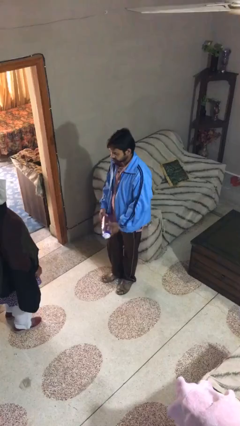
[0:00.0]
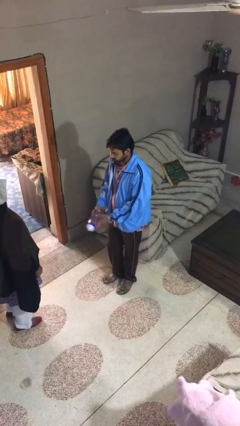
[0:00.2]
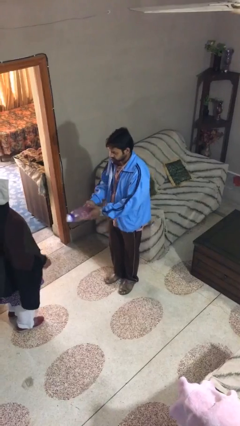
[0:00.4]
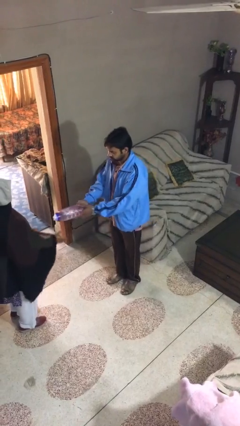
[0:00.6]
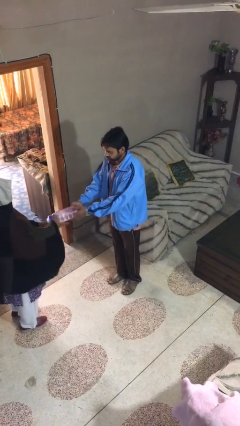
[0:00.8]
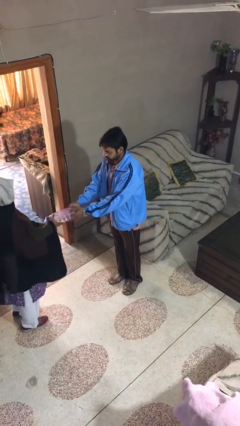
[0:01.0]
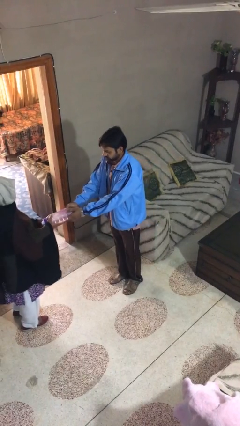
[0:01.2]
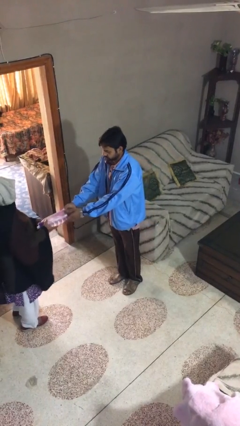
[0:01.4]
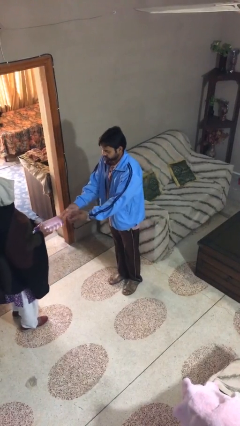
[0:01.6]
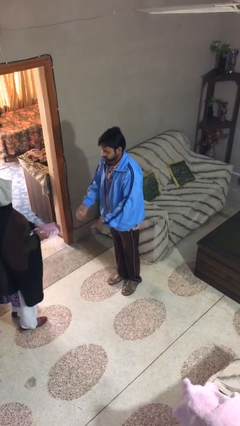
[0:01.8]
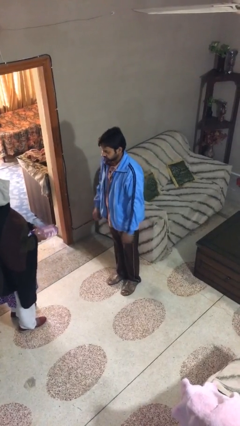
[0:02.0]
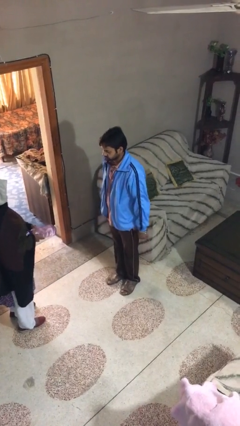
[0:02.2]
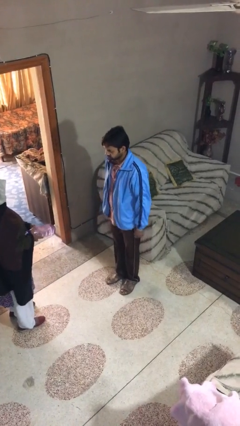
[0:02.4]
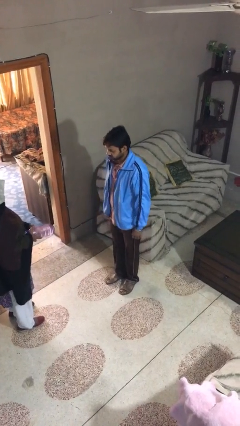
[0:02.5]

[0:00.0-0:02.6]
person transfers object to person

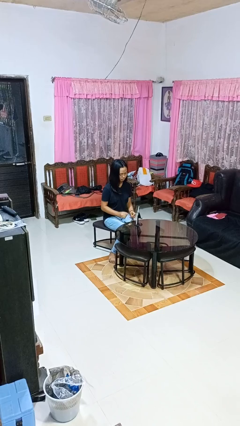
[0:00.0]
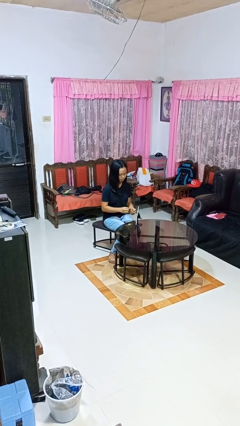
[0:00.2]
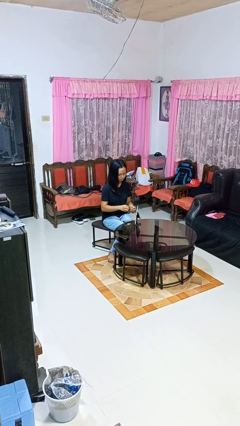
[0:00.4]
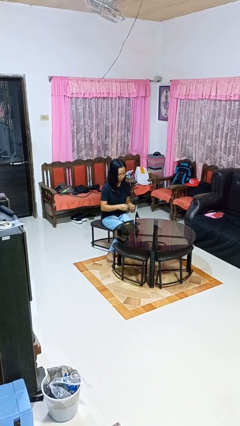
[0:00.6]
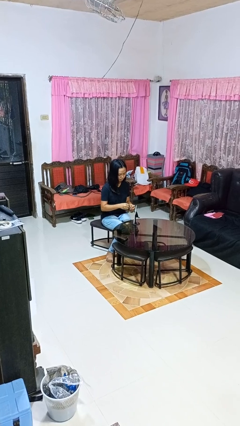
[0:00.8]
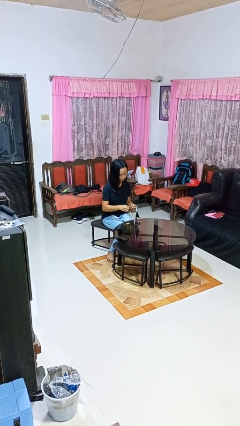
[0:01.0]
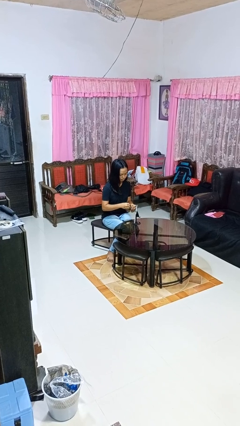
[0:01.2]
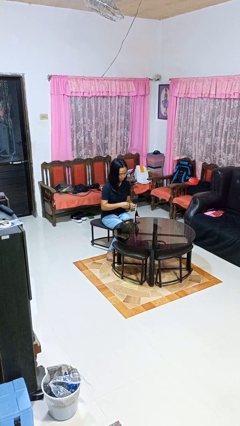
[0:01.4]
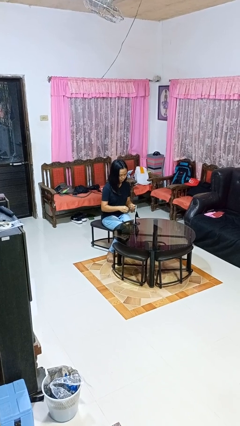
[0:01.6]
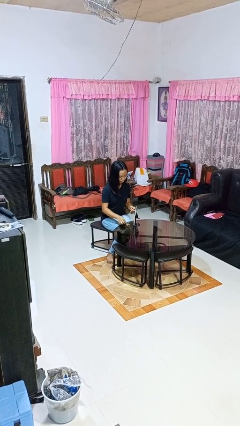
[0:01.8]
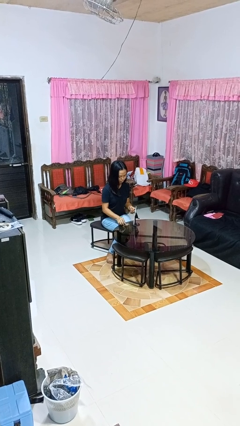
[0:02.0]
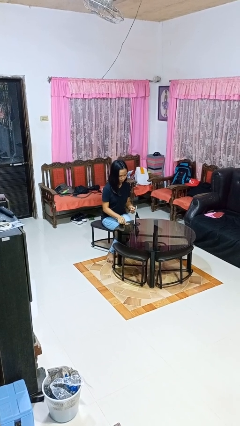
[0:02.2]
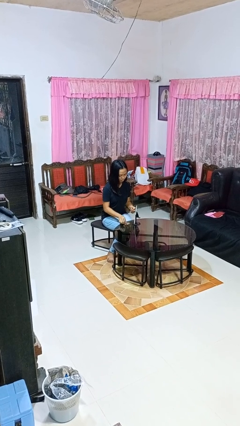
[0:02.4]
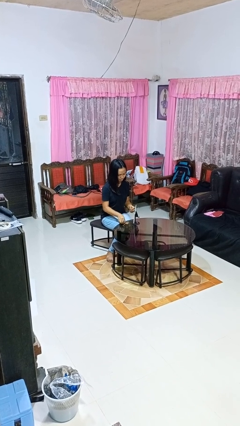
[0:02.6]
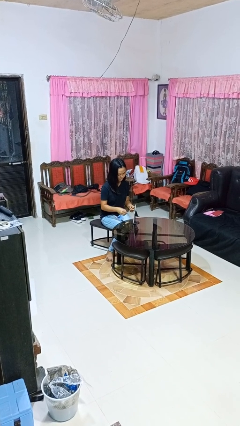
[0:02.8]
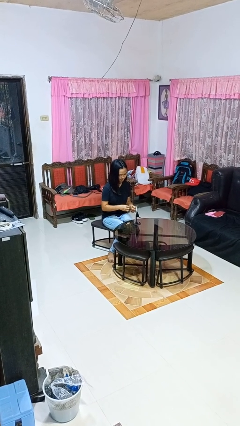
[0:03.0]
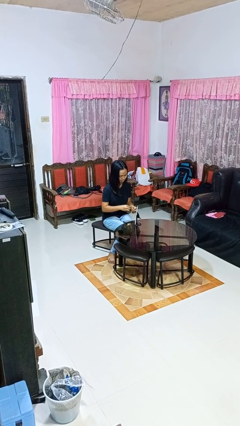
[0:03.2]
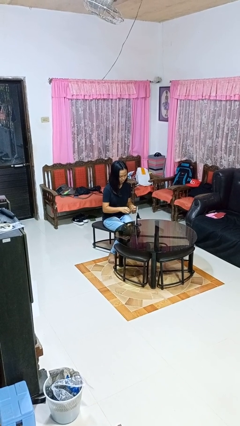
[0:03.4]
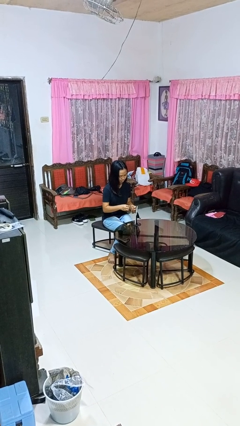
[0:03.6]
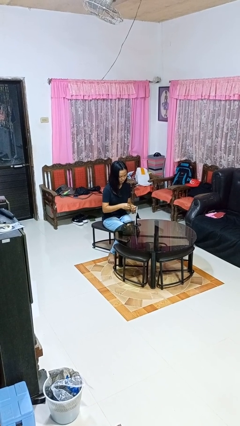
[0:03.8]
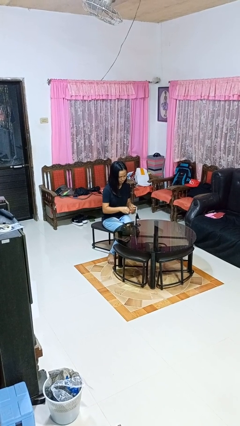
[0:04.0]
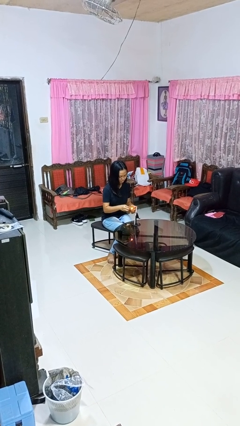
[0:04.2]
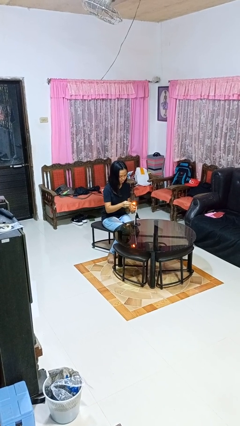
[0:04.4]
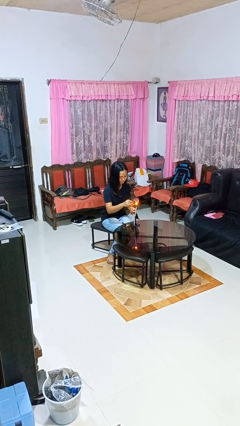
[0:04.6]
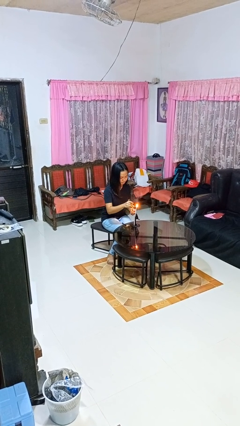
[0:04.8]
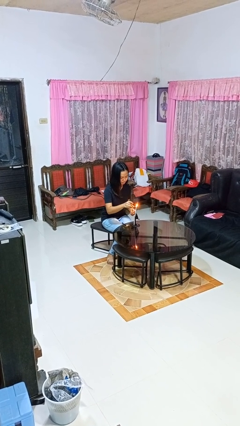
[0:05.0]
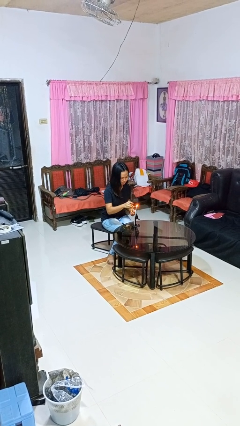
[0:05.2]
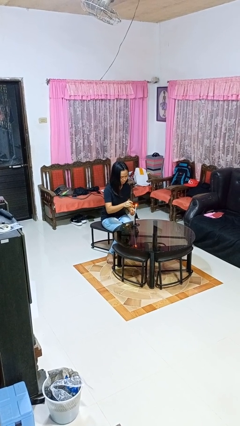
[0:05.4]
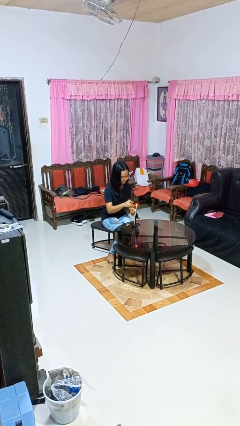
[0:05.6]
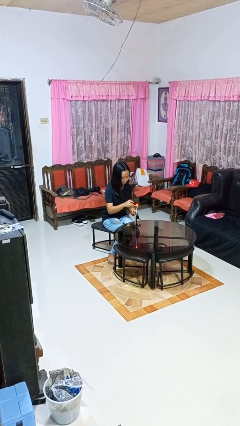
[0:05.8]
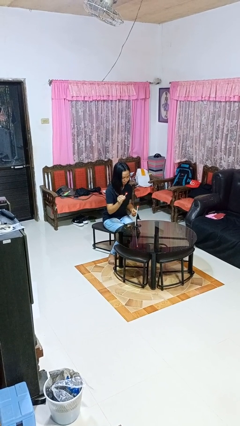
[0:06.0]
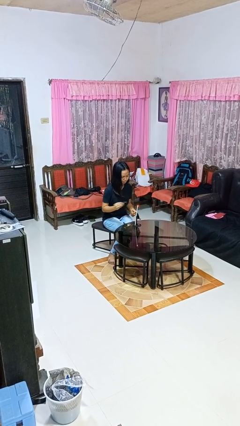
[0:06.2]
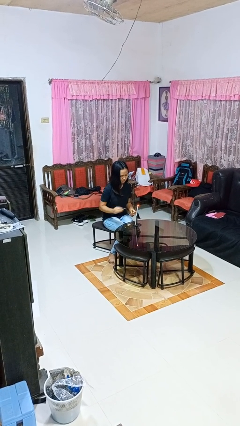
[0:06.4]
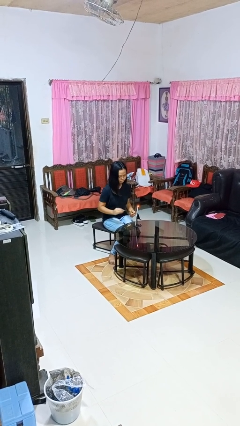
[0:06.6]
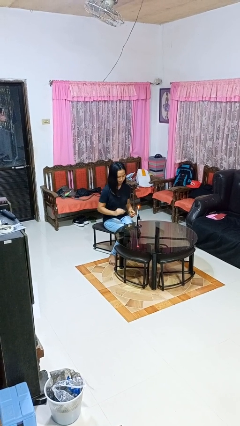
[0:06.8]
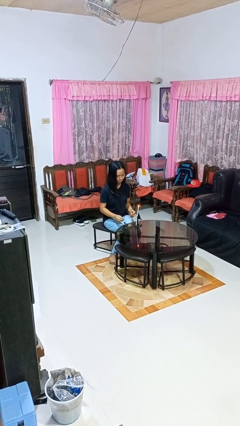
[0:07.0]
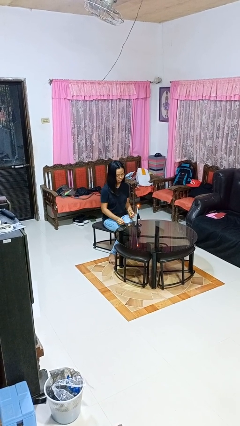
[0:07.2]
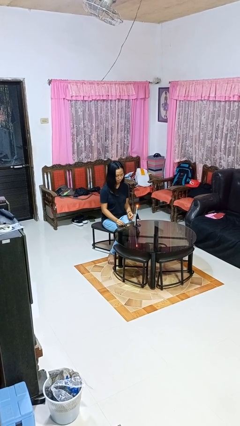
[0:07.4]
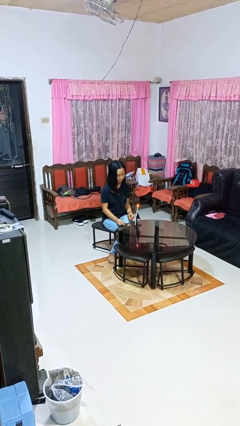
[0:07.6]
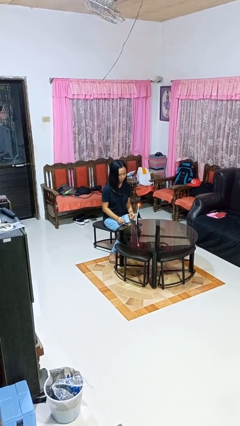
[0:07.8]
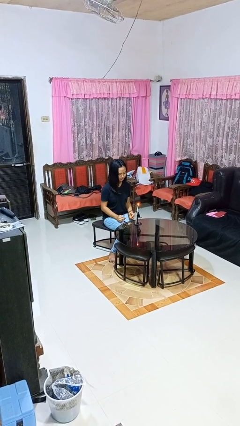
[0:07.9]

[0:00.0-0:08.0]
person lights candle

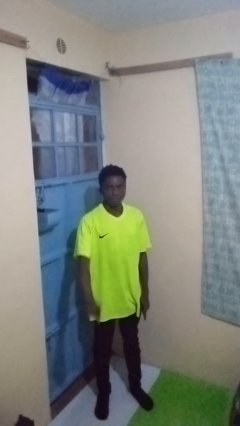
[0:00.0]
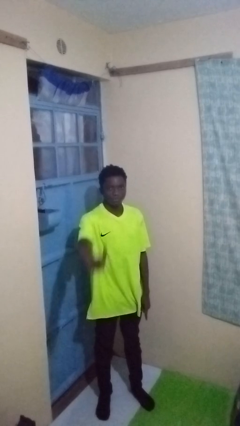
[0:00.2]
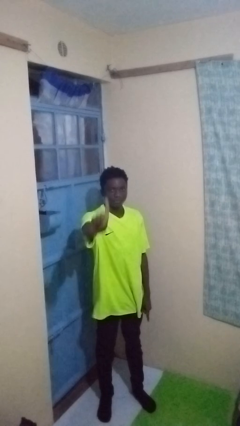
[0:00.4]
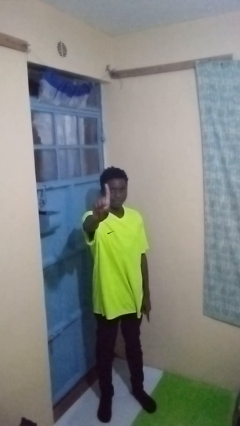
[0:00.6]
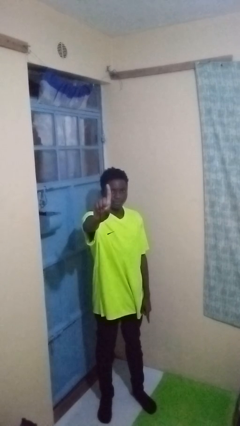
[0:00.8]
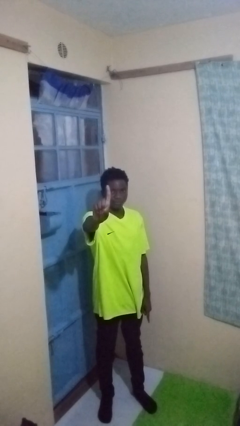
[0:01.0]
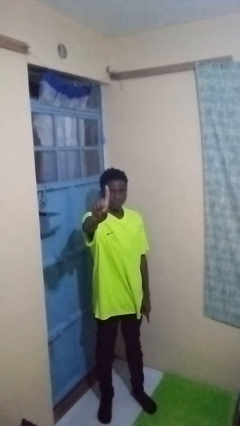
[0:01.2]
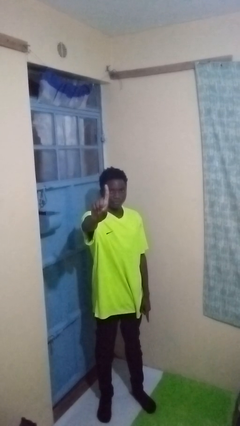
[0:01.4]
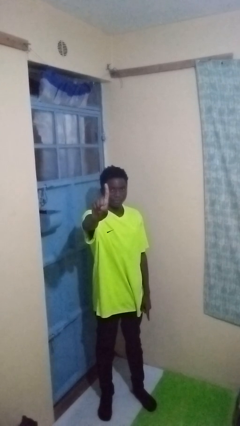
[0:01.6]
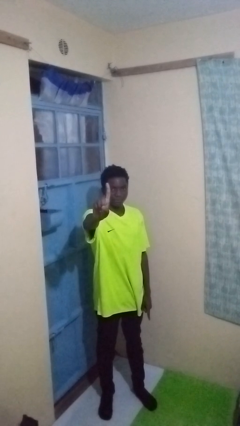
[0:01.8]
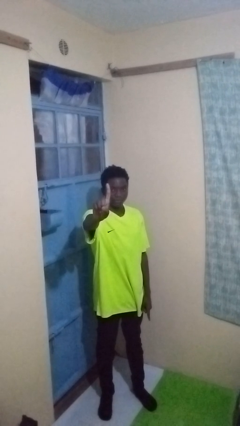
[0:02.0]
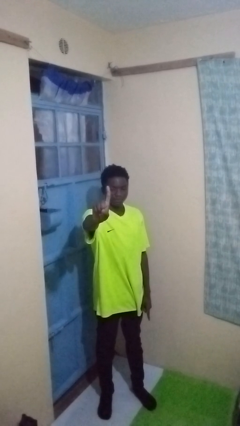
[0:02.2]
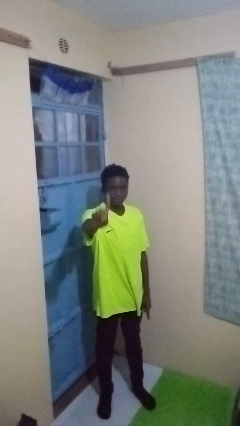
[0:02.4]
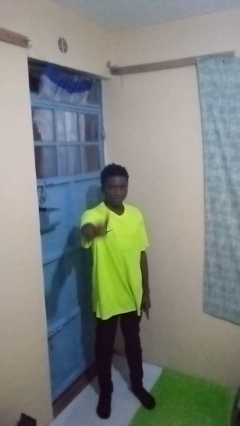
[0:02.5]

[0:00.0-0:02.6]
person gestures number one

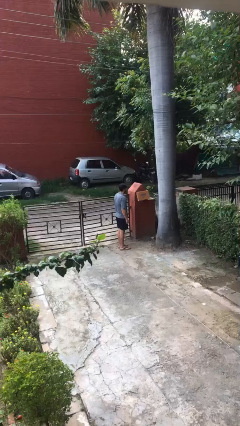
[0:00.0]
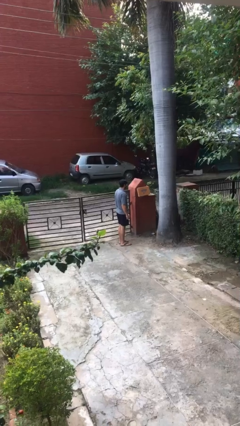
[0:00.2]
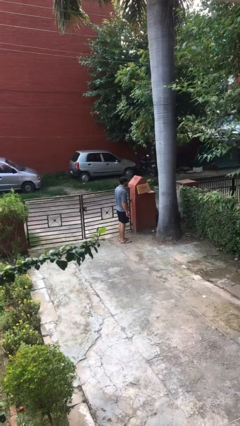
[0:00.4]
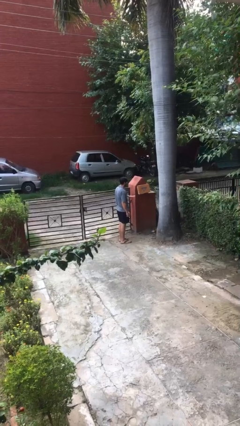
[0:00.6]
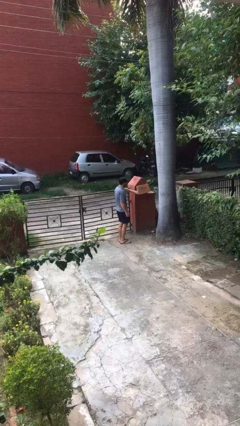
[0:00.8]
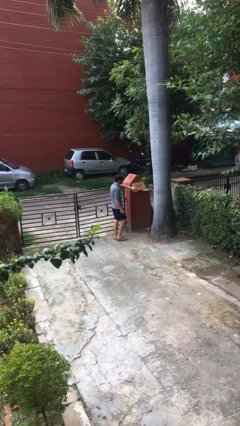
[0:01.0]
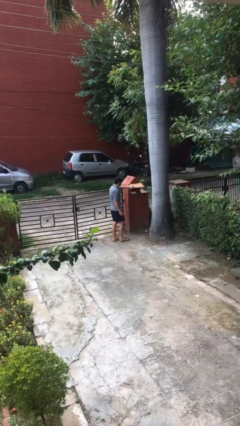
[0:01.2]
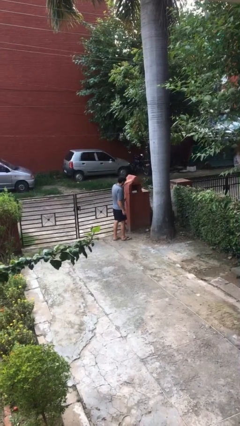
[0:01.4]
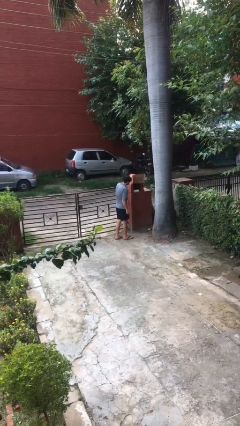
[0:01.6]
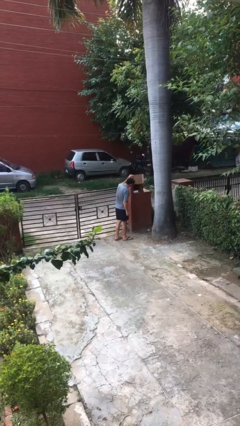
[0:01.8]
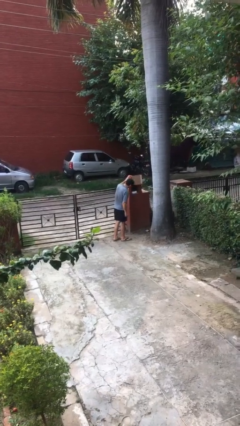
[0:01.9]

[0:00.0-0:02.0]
person opens mailbox

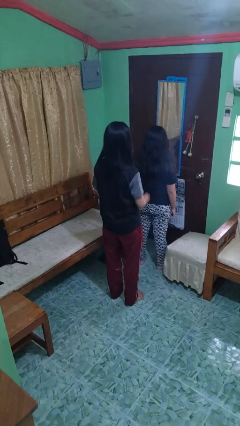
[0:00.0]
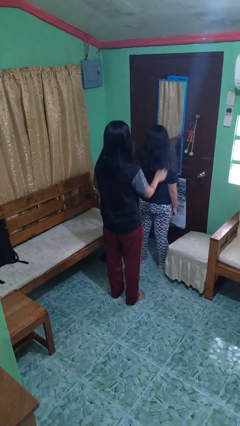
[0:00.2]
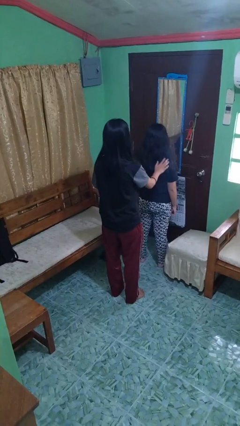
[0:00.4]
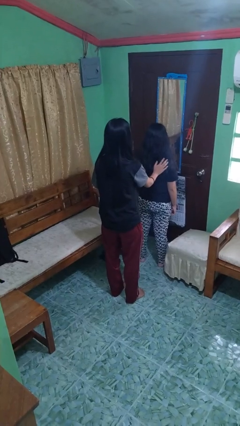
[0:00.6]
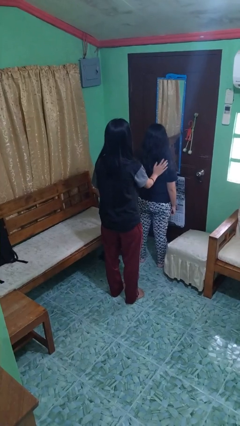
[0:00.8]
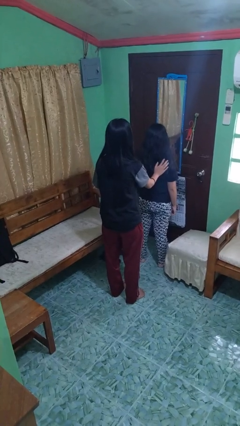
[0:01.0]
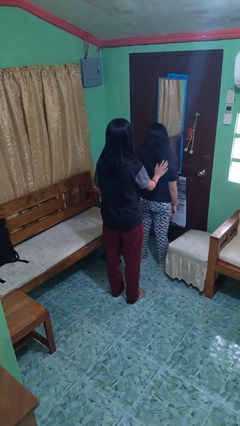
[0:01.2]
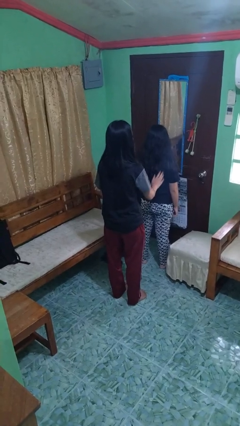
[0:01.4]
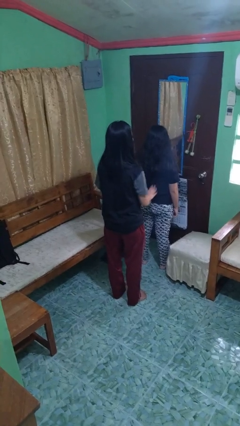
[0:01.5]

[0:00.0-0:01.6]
person touches back of person

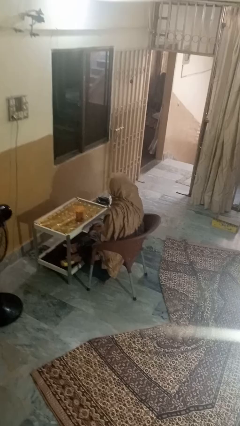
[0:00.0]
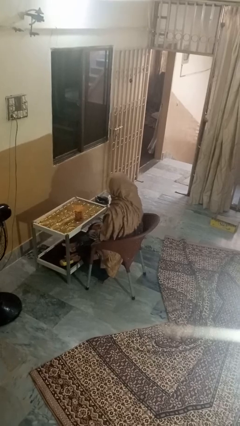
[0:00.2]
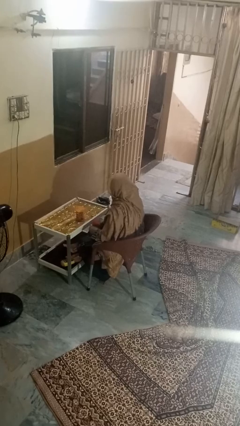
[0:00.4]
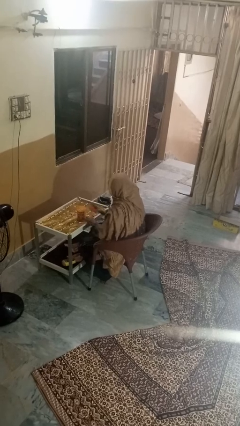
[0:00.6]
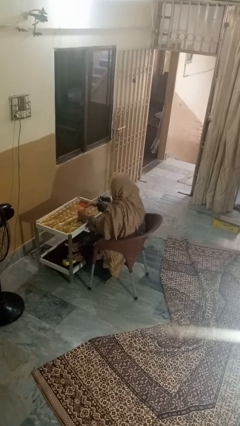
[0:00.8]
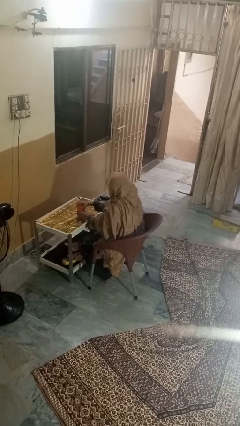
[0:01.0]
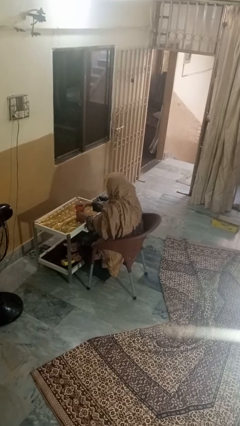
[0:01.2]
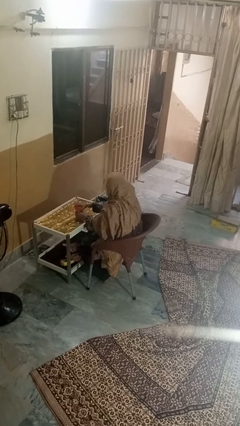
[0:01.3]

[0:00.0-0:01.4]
person closes jar
